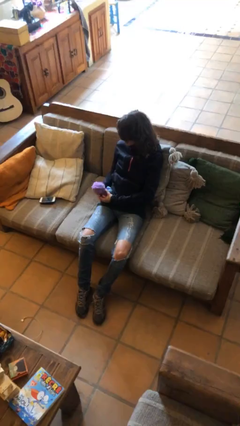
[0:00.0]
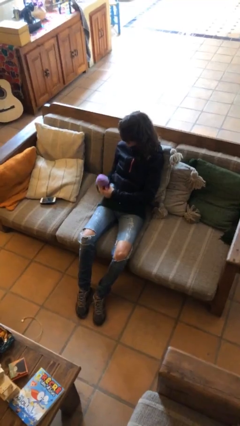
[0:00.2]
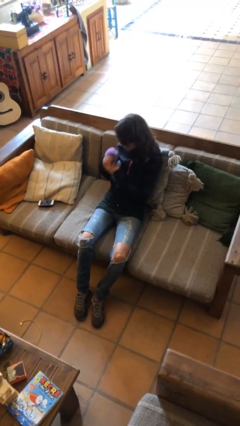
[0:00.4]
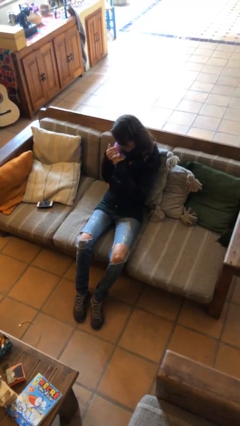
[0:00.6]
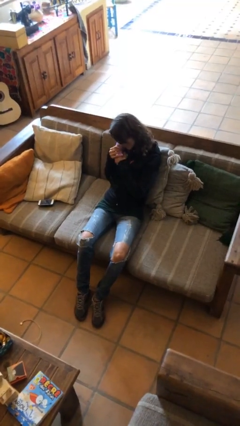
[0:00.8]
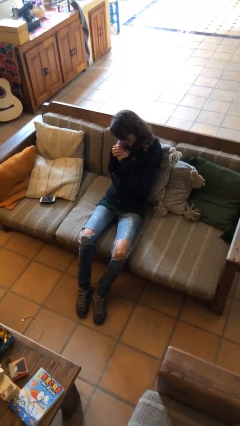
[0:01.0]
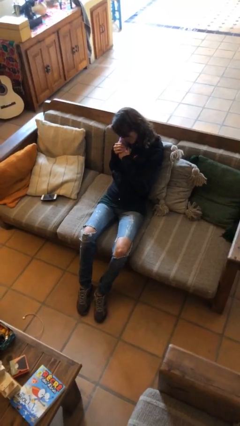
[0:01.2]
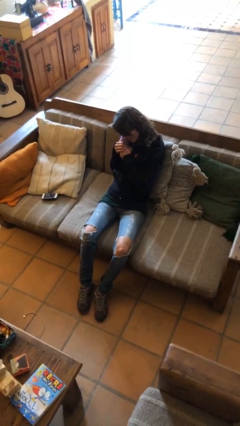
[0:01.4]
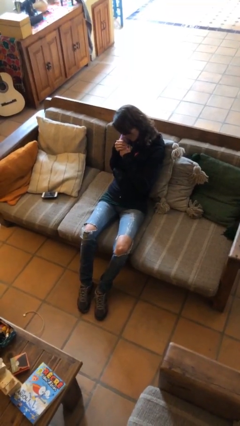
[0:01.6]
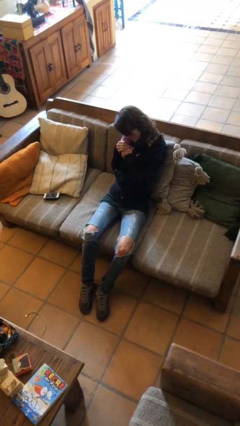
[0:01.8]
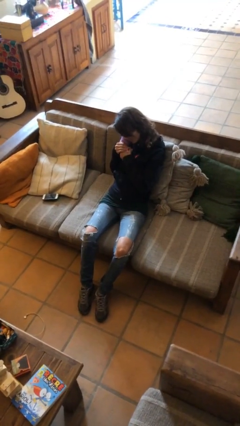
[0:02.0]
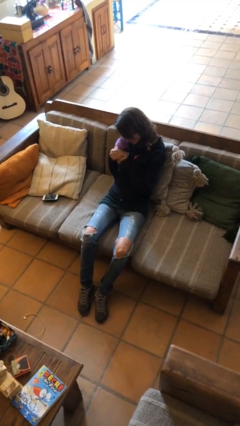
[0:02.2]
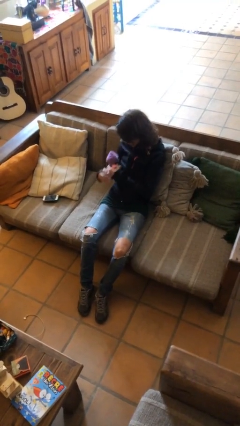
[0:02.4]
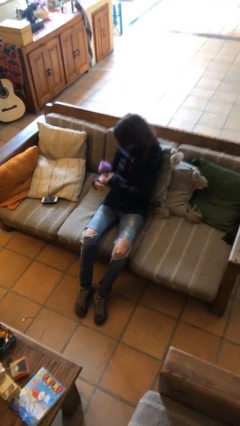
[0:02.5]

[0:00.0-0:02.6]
person hugs stuffed animal

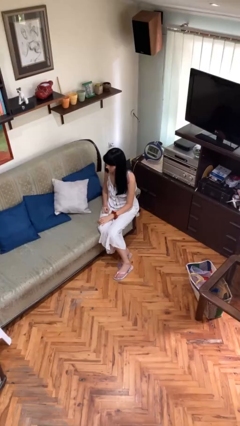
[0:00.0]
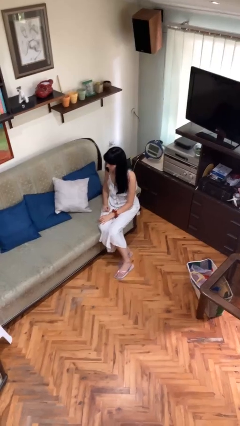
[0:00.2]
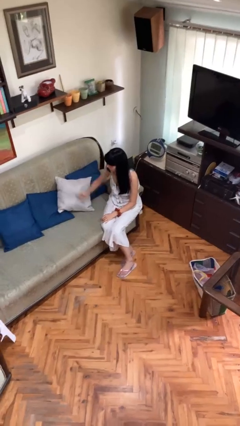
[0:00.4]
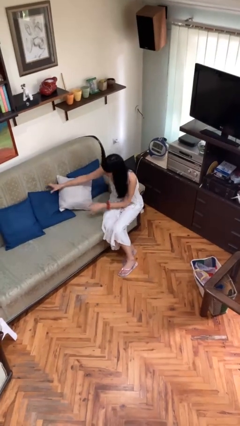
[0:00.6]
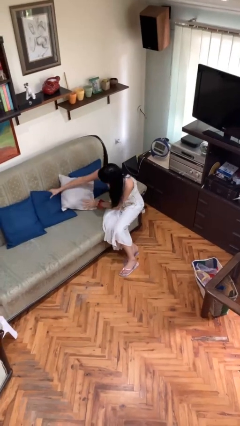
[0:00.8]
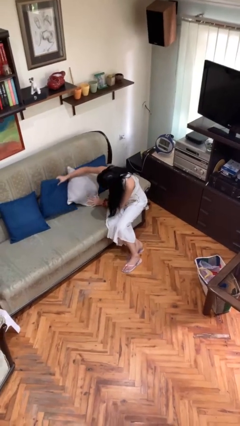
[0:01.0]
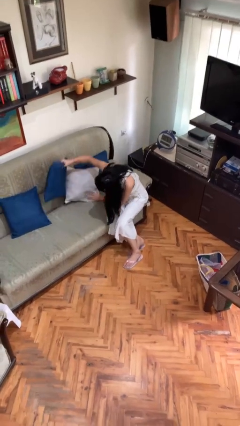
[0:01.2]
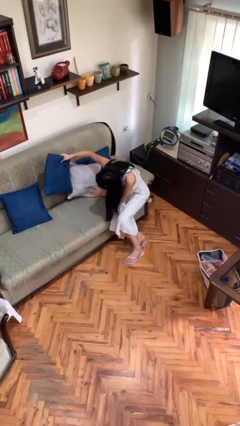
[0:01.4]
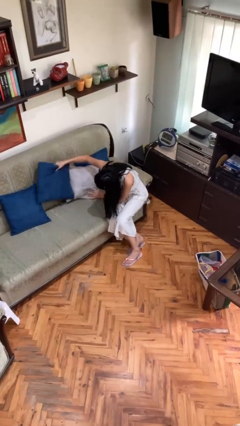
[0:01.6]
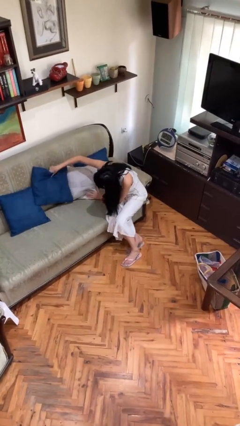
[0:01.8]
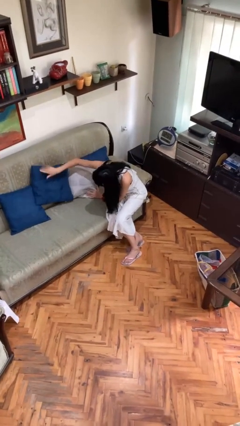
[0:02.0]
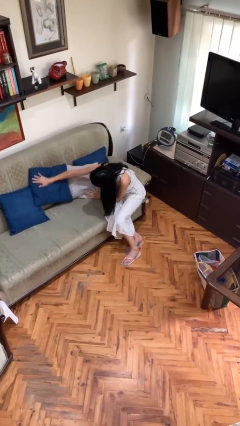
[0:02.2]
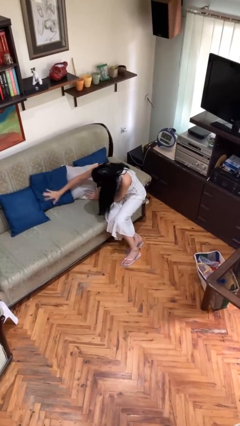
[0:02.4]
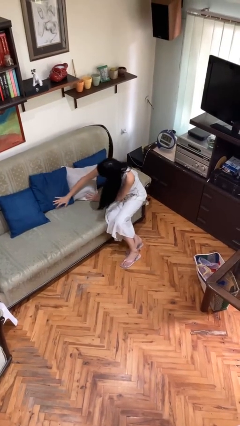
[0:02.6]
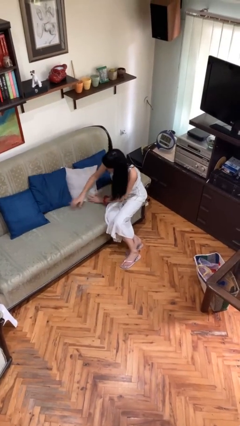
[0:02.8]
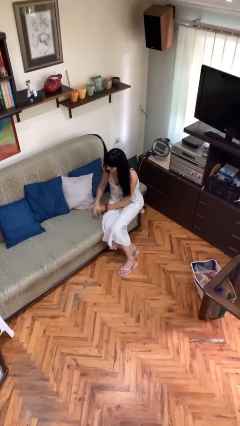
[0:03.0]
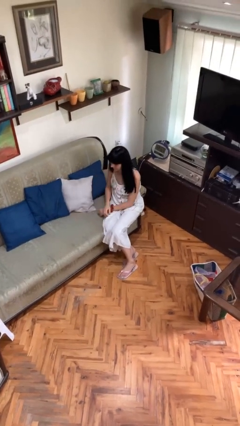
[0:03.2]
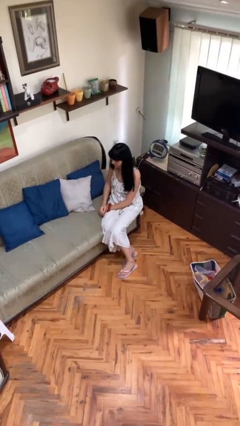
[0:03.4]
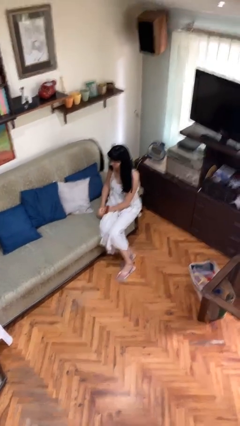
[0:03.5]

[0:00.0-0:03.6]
person searches in couch

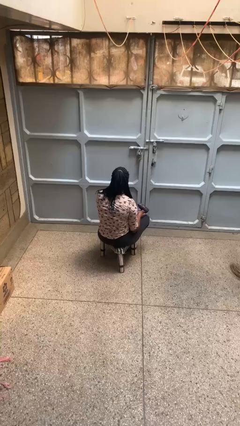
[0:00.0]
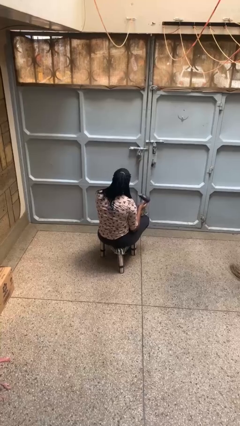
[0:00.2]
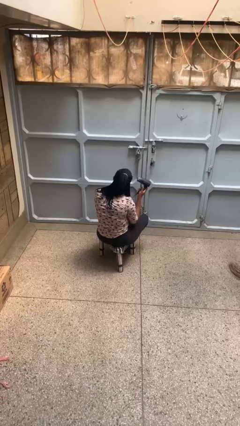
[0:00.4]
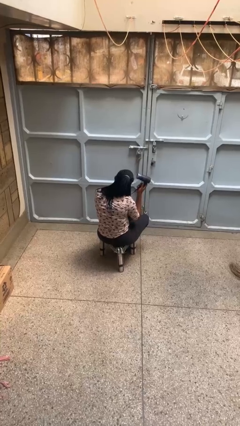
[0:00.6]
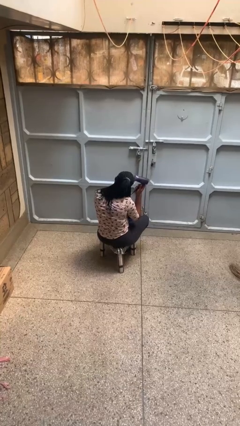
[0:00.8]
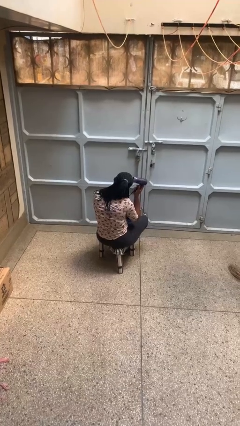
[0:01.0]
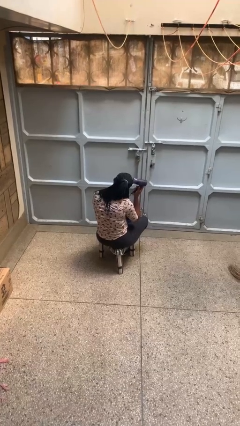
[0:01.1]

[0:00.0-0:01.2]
person dries hair with hairdryer

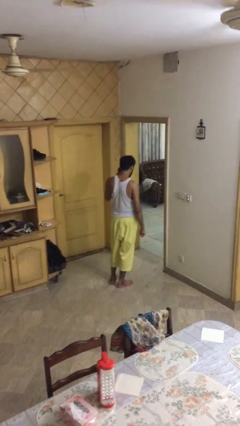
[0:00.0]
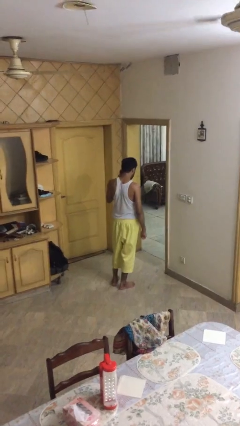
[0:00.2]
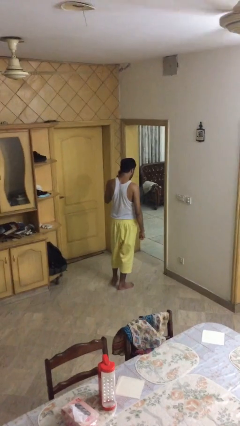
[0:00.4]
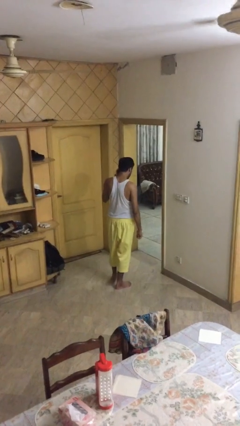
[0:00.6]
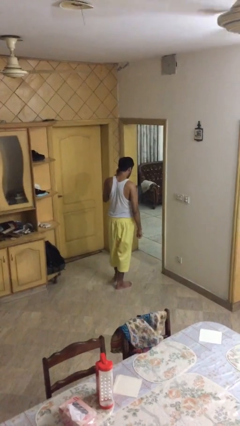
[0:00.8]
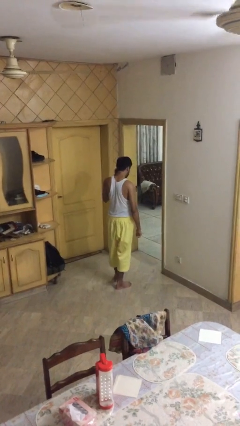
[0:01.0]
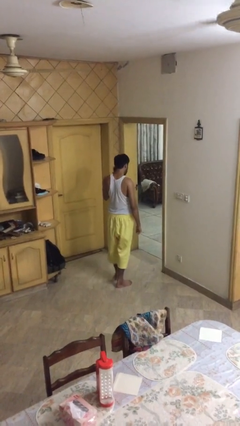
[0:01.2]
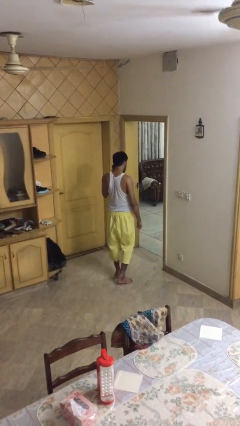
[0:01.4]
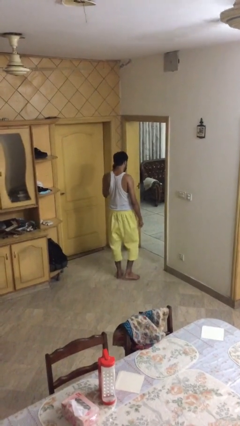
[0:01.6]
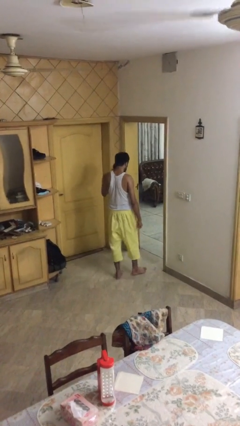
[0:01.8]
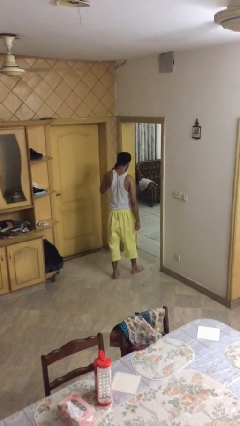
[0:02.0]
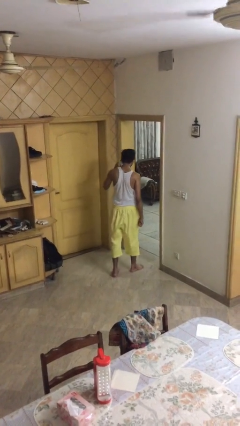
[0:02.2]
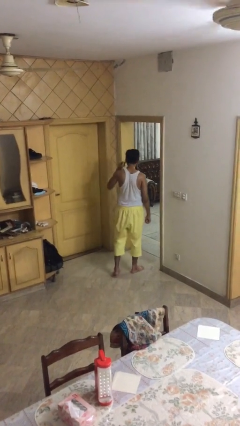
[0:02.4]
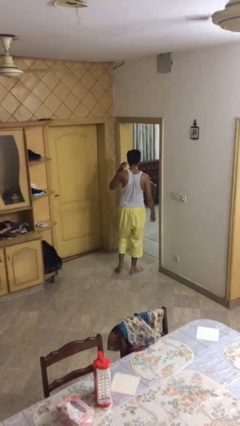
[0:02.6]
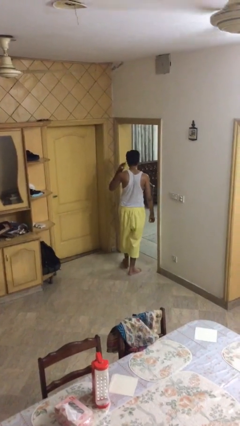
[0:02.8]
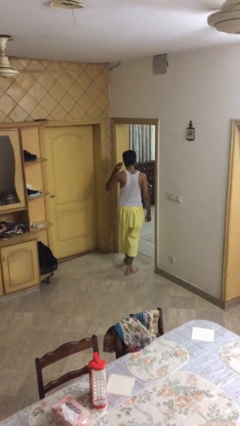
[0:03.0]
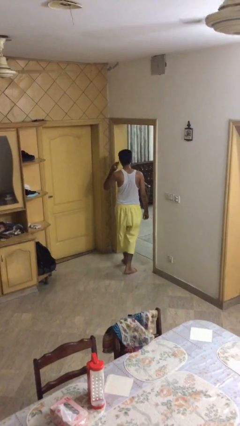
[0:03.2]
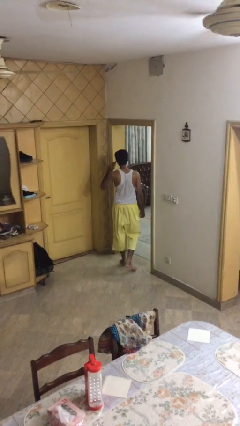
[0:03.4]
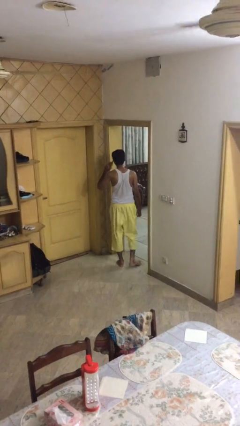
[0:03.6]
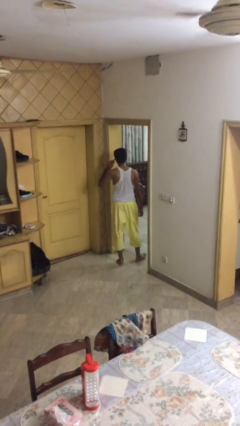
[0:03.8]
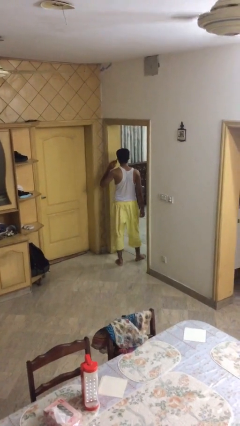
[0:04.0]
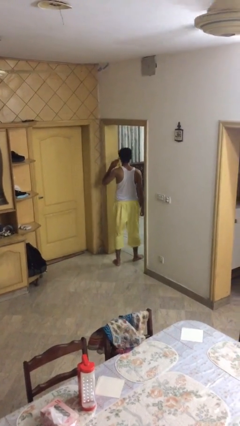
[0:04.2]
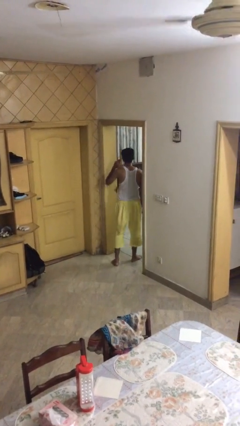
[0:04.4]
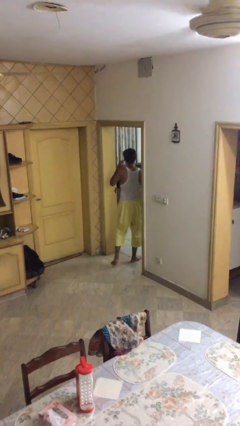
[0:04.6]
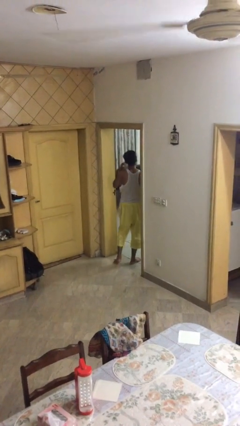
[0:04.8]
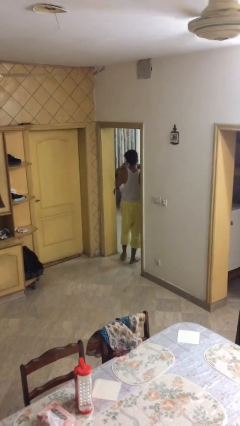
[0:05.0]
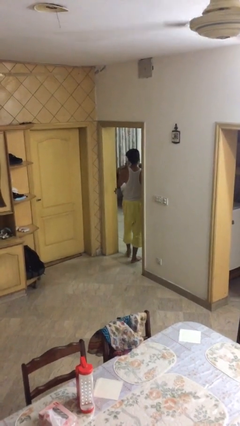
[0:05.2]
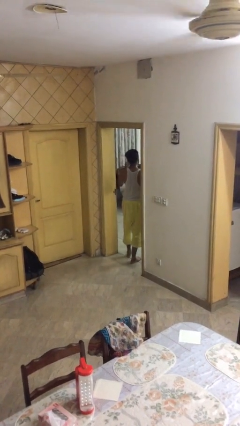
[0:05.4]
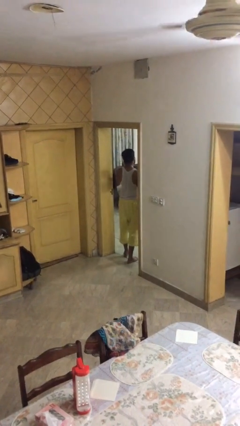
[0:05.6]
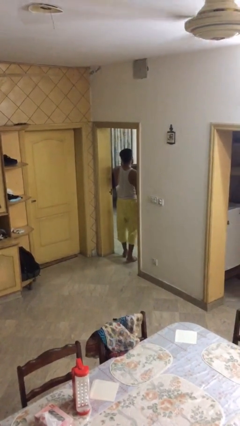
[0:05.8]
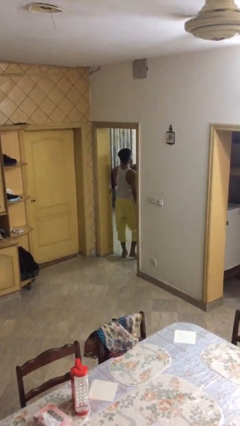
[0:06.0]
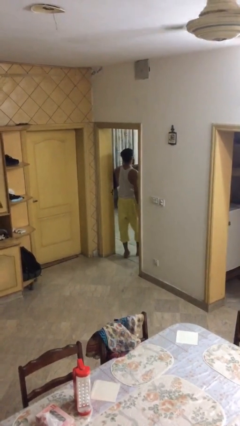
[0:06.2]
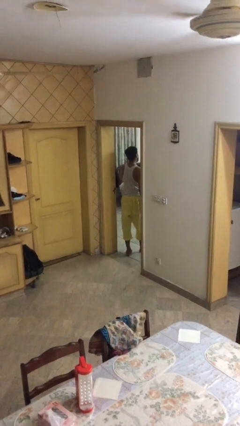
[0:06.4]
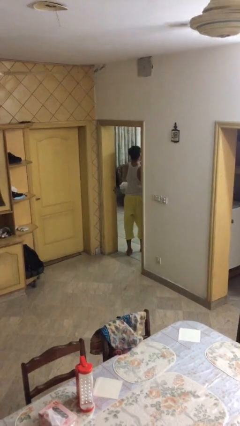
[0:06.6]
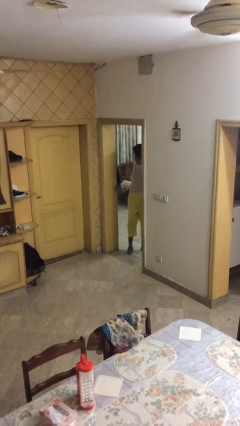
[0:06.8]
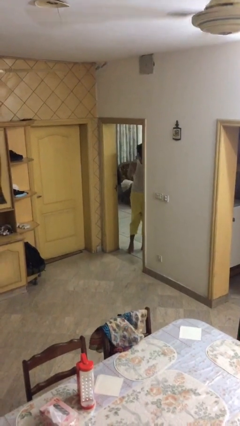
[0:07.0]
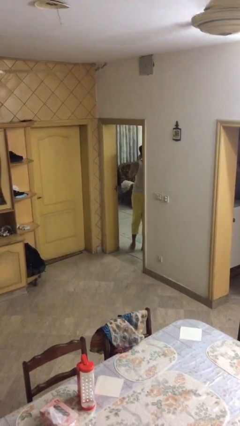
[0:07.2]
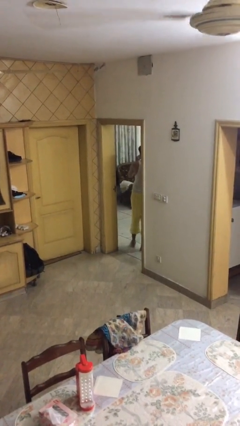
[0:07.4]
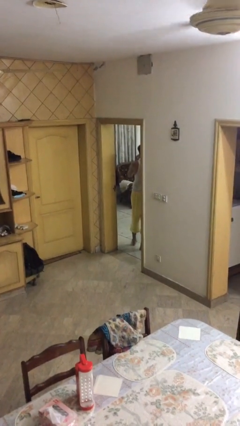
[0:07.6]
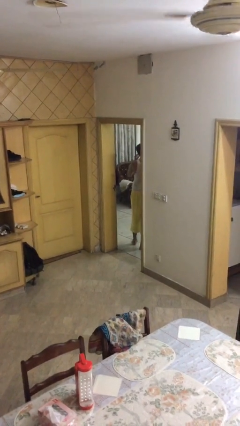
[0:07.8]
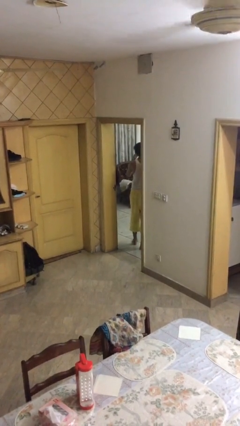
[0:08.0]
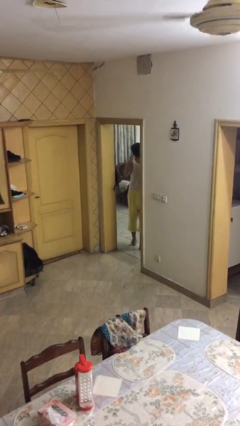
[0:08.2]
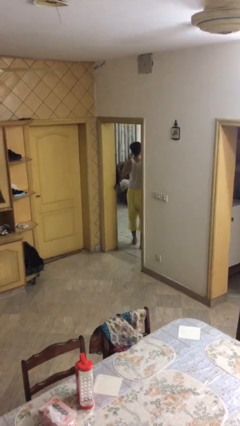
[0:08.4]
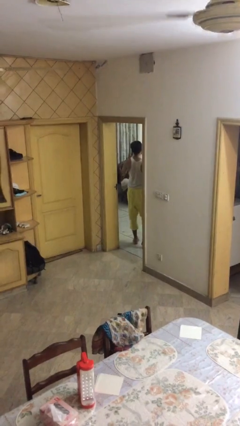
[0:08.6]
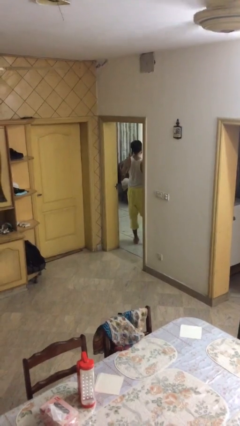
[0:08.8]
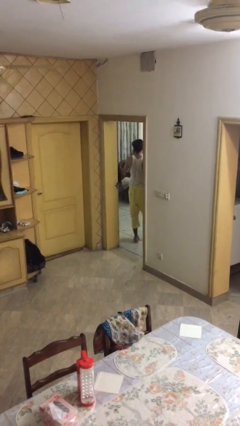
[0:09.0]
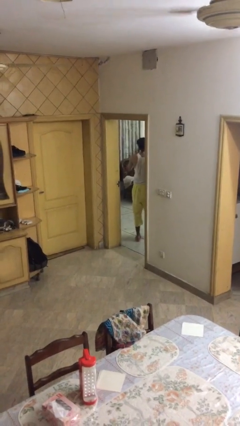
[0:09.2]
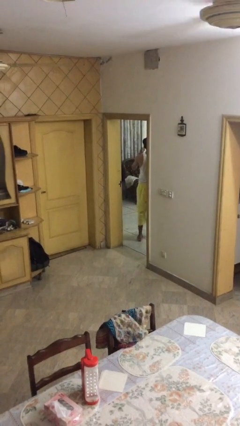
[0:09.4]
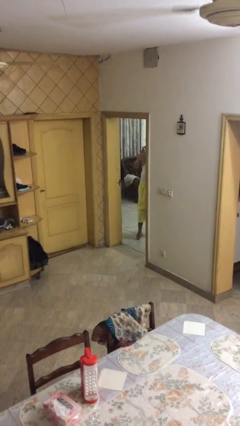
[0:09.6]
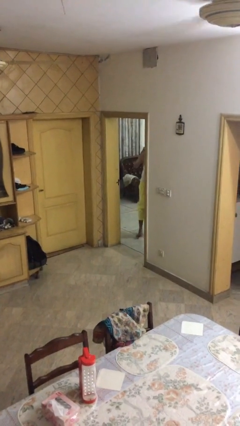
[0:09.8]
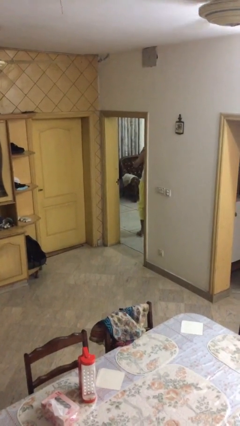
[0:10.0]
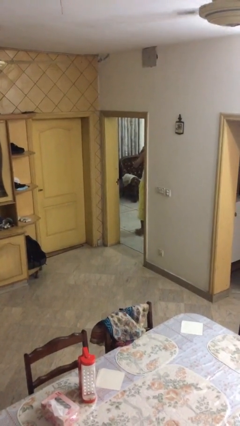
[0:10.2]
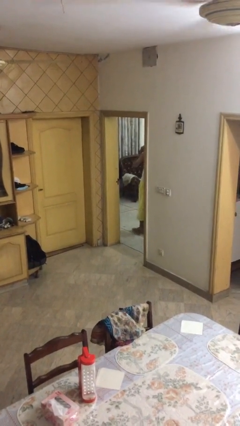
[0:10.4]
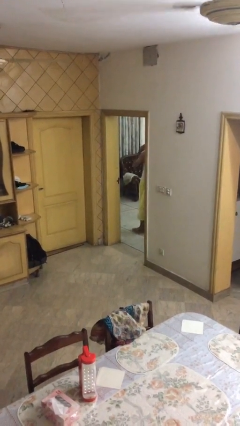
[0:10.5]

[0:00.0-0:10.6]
person exits scene through structure

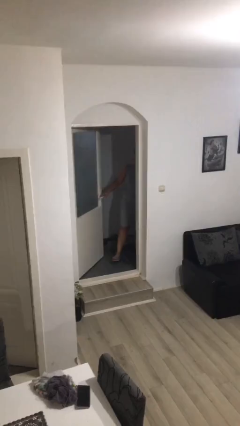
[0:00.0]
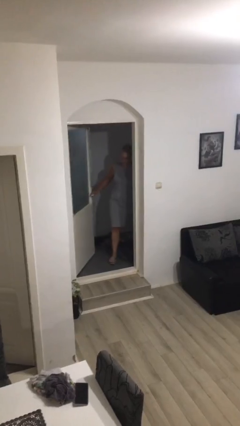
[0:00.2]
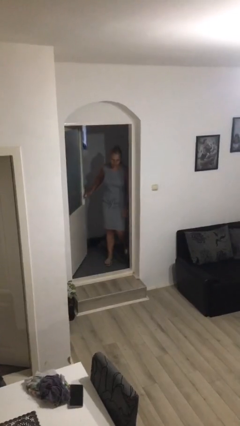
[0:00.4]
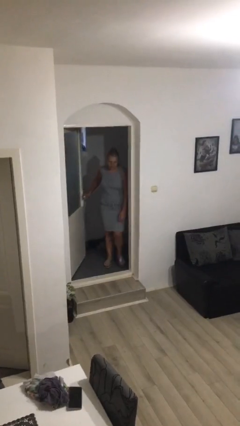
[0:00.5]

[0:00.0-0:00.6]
person opens facility door
